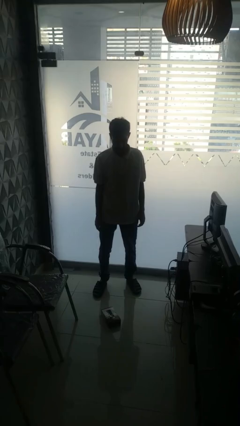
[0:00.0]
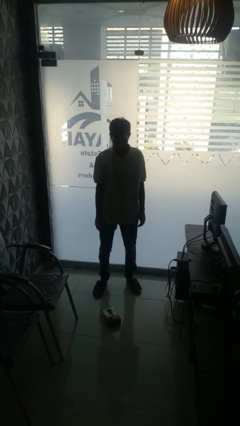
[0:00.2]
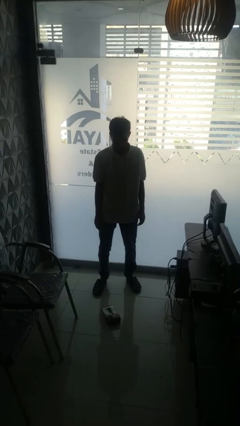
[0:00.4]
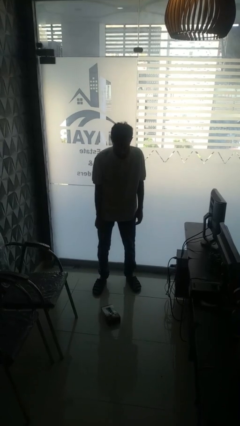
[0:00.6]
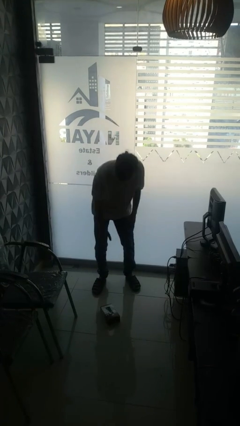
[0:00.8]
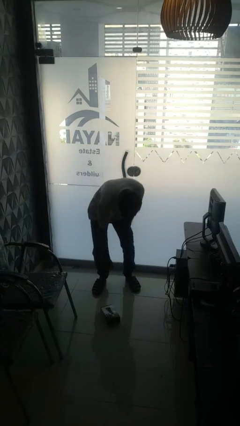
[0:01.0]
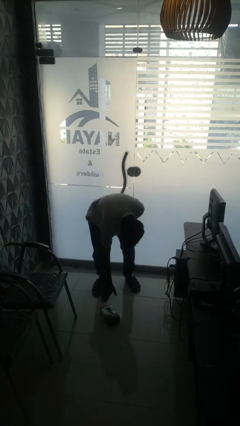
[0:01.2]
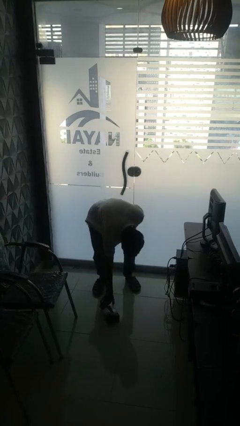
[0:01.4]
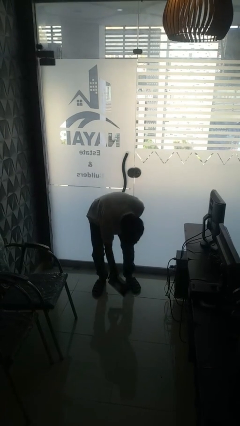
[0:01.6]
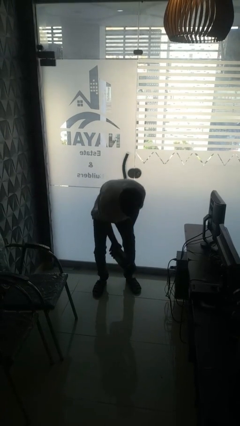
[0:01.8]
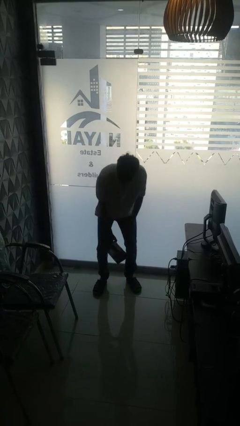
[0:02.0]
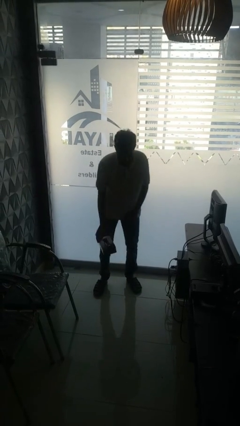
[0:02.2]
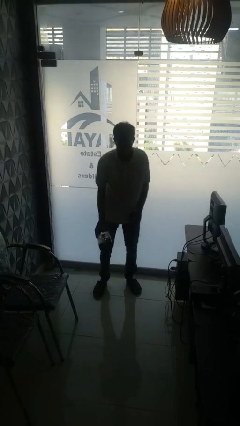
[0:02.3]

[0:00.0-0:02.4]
person picks up object from floor

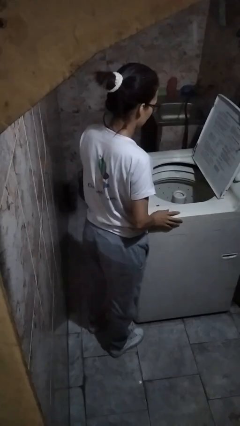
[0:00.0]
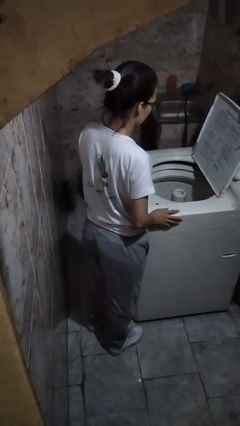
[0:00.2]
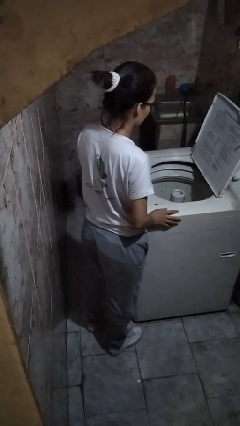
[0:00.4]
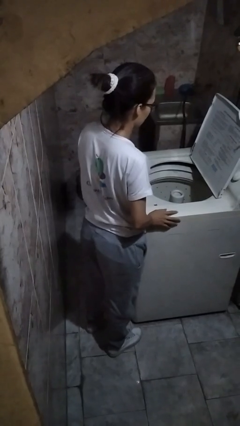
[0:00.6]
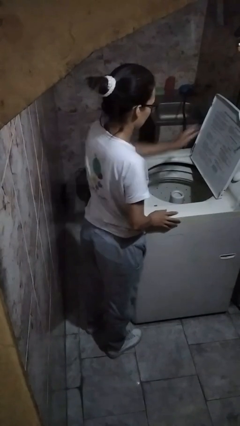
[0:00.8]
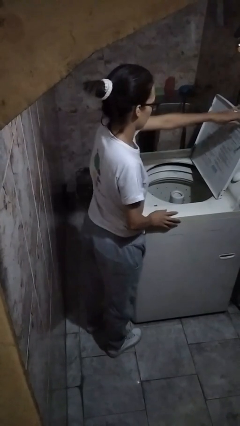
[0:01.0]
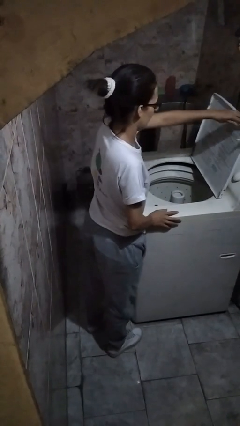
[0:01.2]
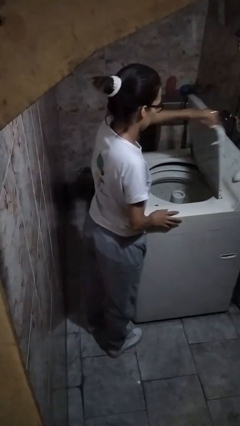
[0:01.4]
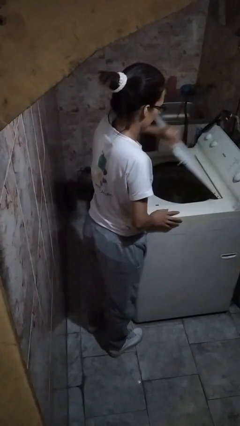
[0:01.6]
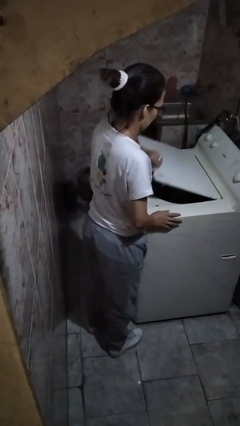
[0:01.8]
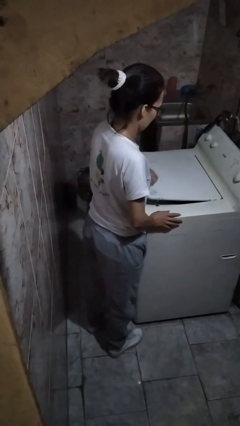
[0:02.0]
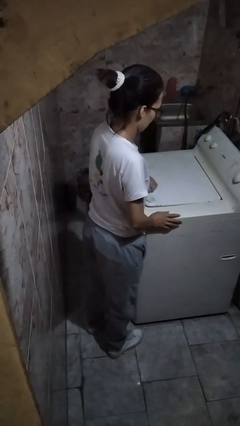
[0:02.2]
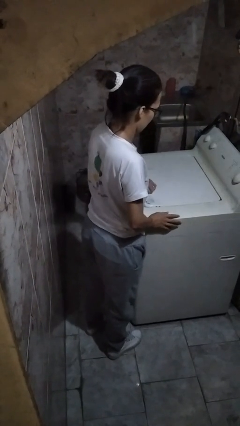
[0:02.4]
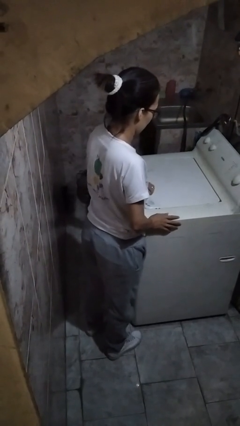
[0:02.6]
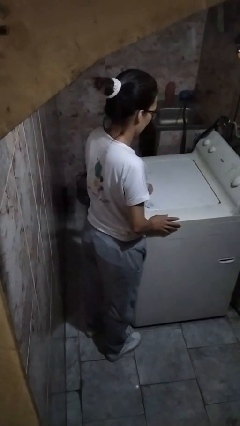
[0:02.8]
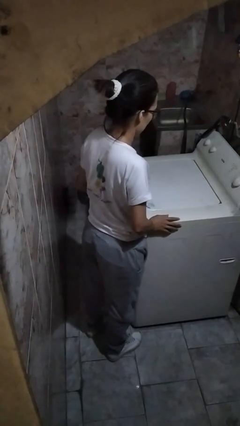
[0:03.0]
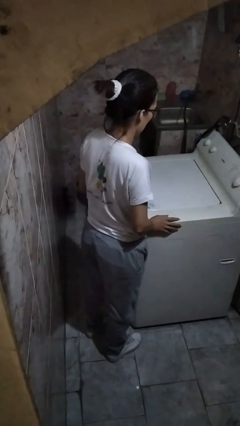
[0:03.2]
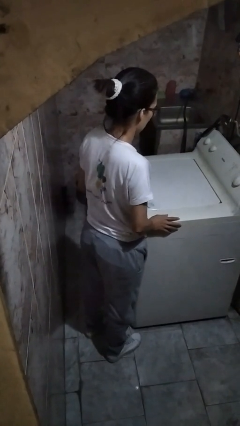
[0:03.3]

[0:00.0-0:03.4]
person closes clothes washer

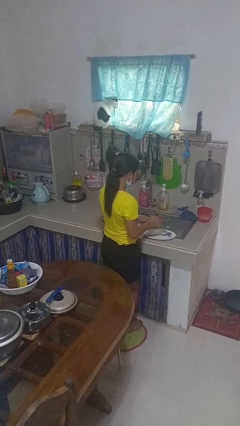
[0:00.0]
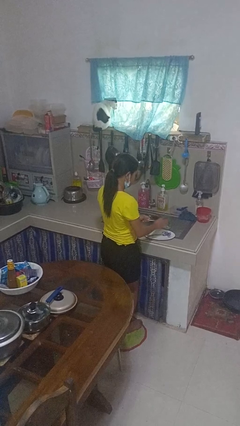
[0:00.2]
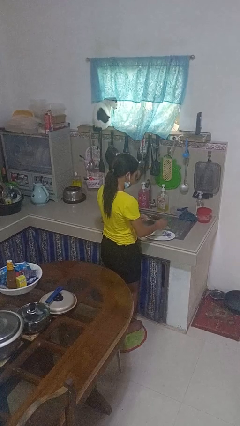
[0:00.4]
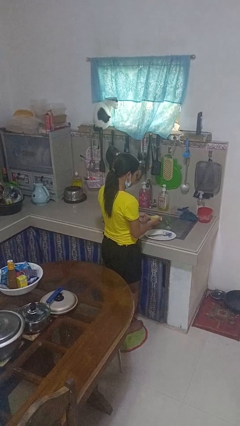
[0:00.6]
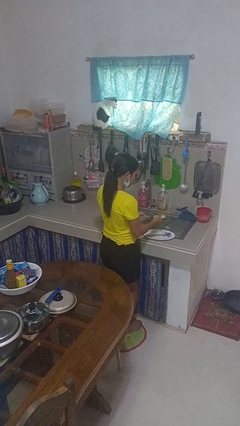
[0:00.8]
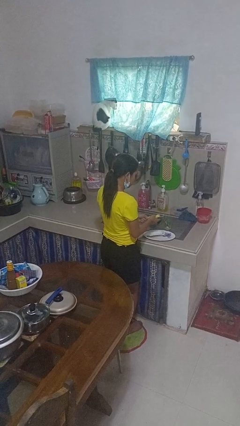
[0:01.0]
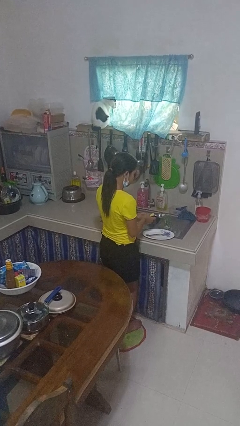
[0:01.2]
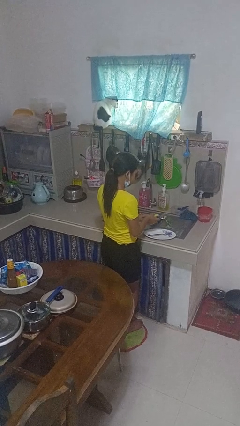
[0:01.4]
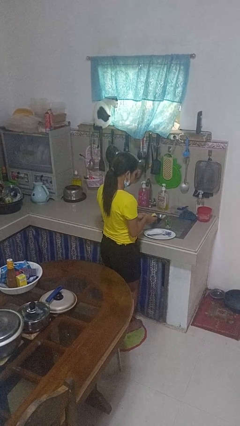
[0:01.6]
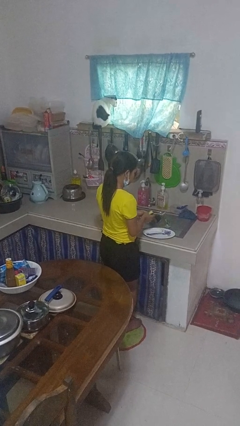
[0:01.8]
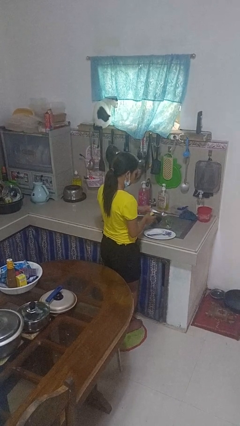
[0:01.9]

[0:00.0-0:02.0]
person washes dish

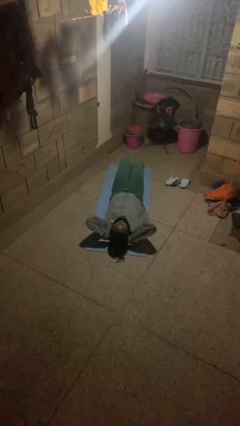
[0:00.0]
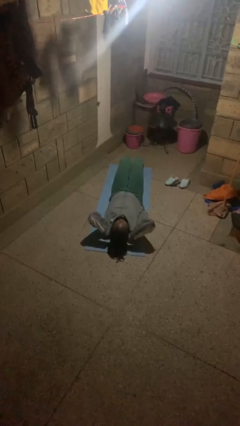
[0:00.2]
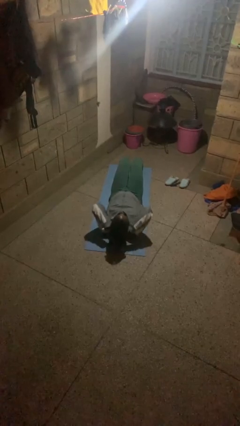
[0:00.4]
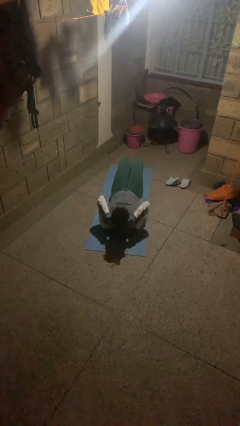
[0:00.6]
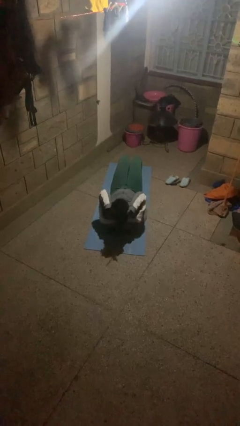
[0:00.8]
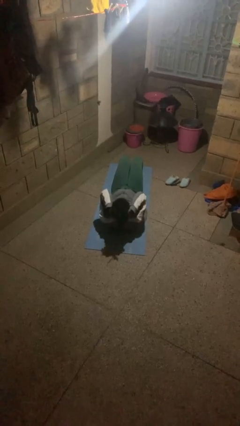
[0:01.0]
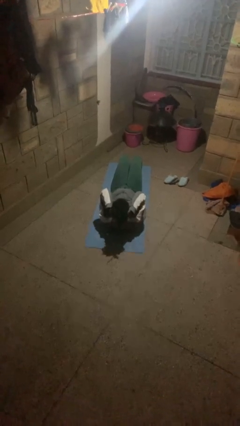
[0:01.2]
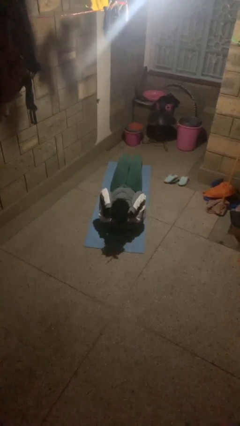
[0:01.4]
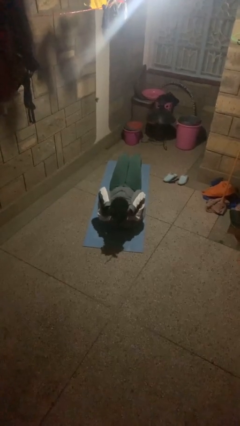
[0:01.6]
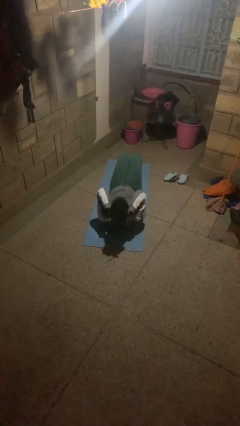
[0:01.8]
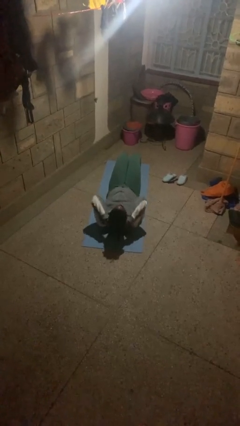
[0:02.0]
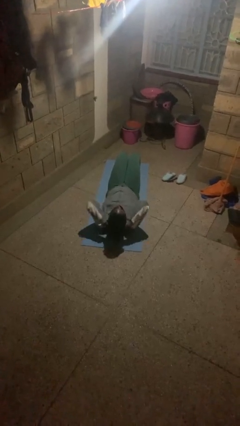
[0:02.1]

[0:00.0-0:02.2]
person exercises with situp

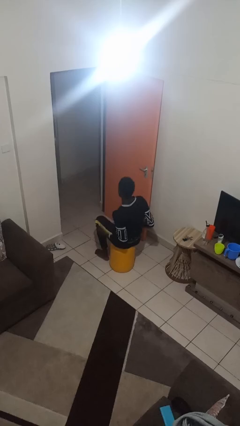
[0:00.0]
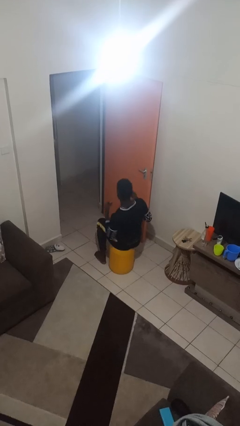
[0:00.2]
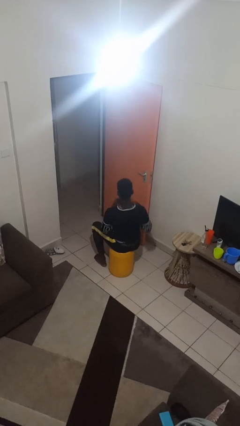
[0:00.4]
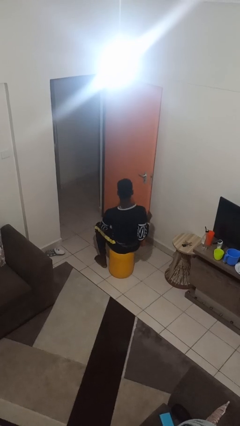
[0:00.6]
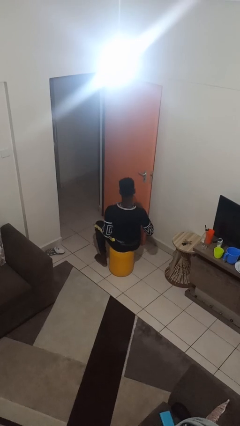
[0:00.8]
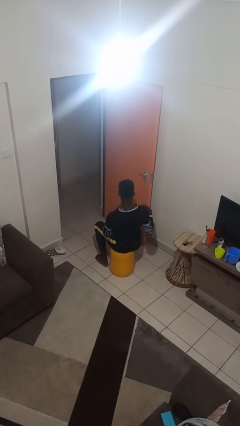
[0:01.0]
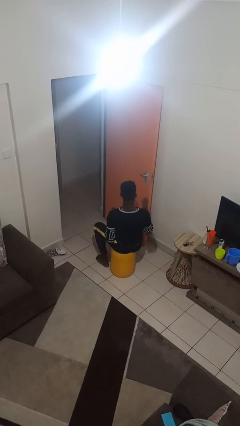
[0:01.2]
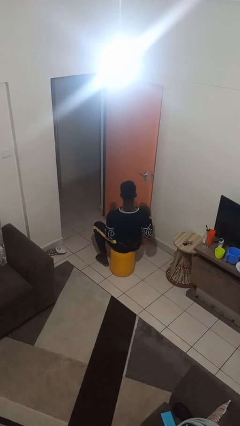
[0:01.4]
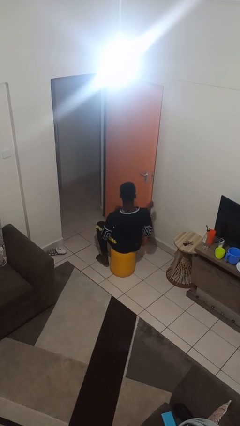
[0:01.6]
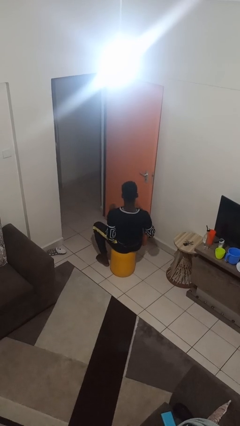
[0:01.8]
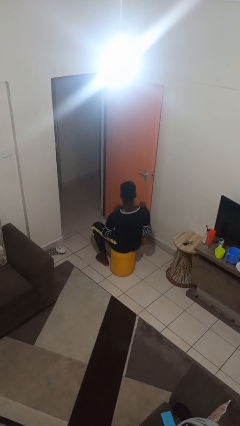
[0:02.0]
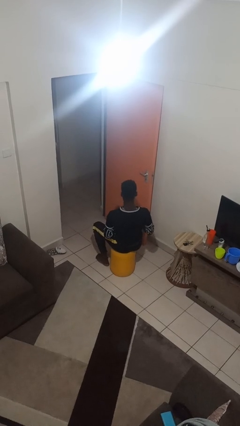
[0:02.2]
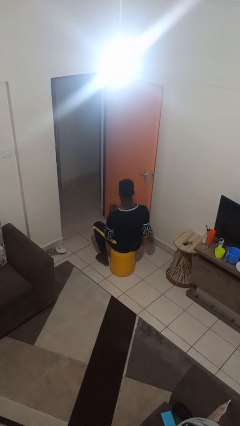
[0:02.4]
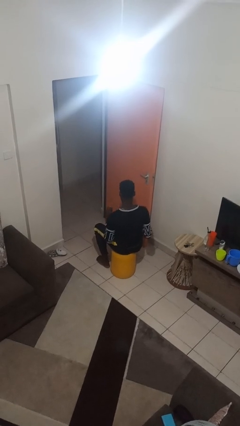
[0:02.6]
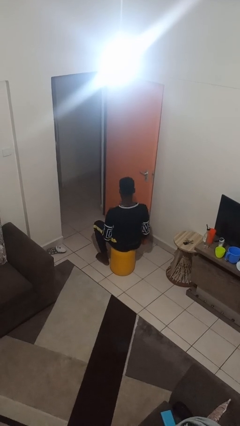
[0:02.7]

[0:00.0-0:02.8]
person drums on chest

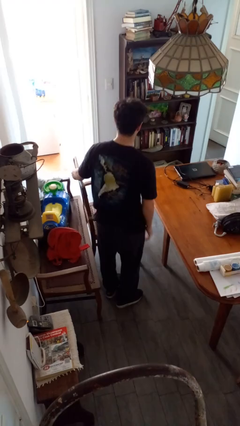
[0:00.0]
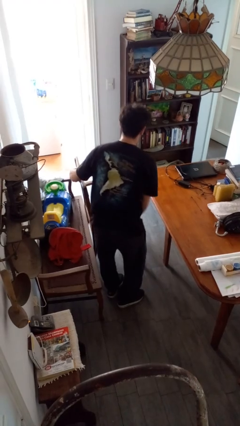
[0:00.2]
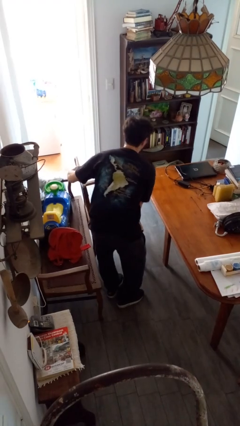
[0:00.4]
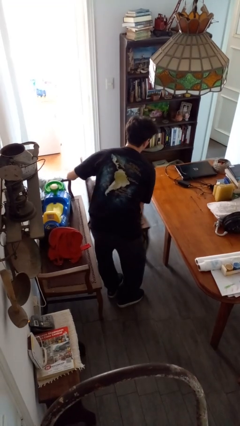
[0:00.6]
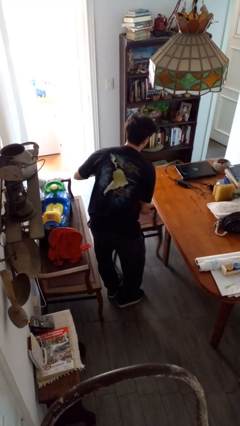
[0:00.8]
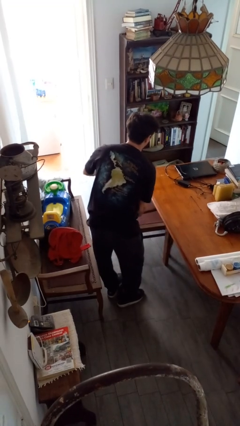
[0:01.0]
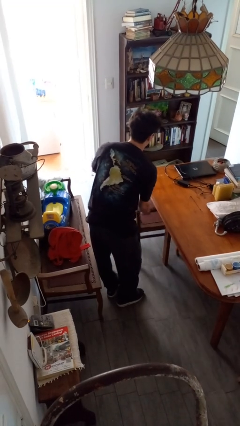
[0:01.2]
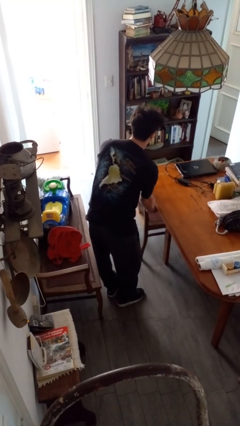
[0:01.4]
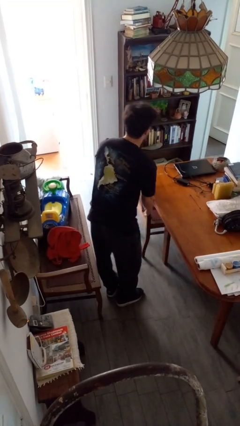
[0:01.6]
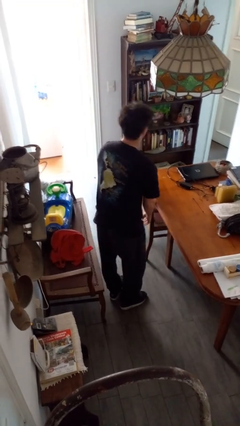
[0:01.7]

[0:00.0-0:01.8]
person pushes in chair

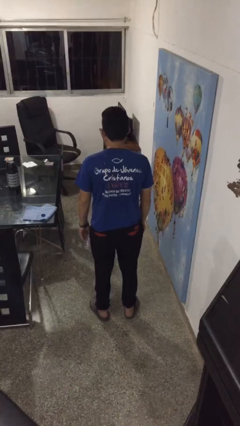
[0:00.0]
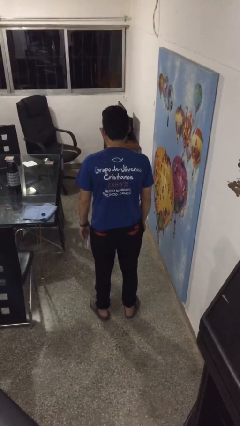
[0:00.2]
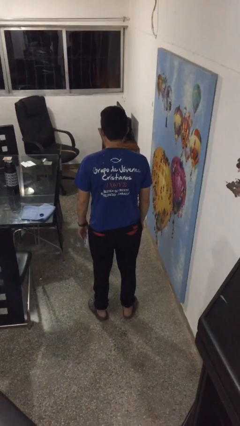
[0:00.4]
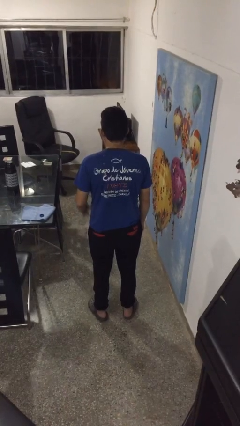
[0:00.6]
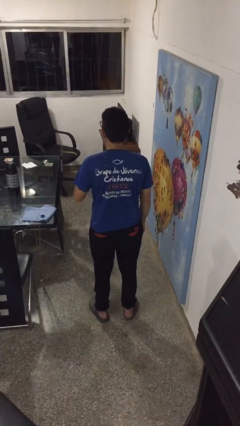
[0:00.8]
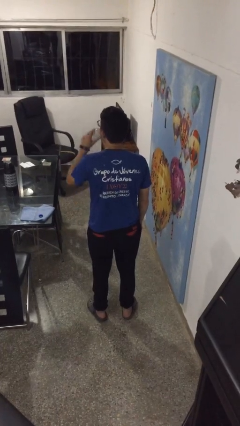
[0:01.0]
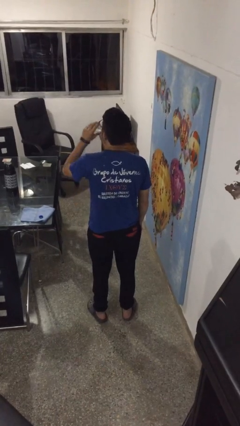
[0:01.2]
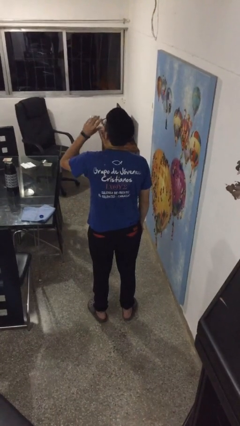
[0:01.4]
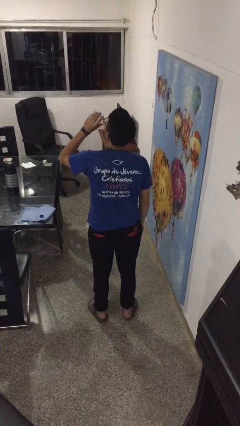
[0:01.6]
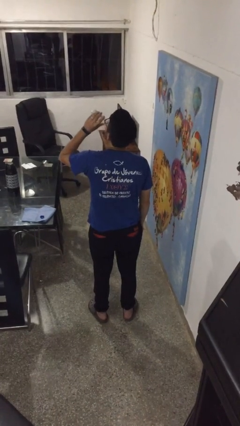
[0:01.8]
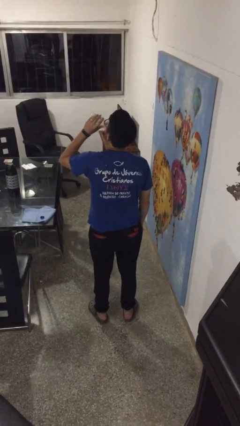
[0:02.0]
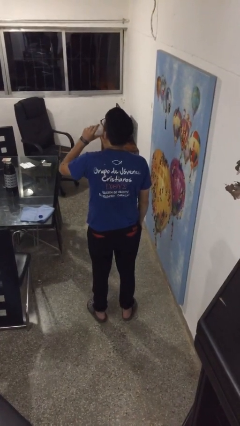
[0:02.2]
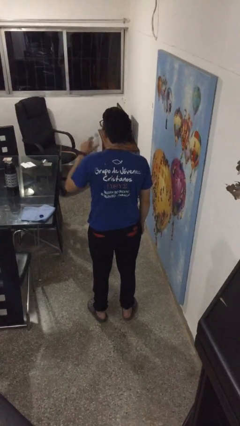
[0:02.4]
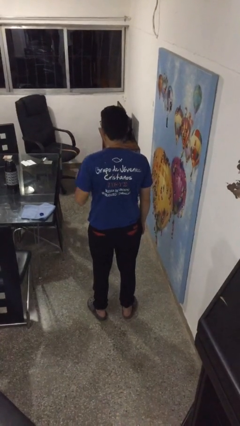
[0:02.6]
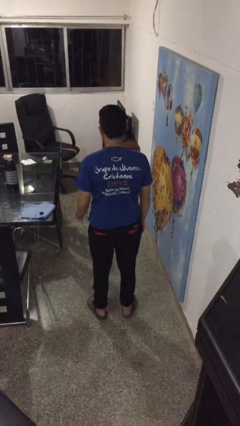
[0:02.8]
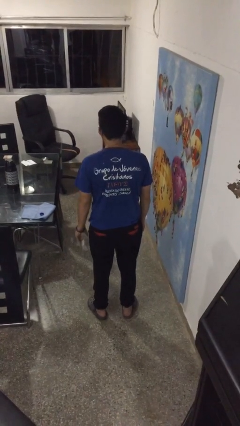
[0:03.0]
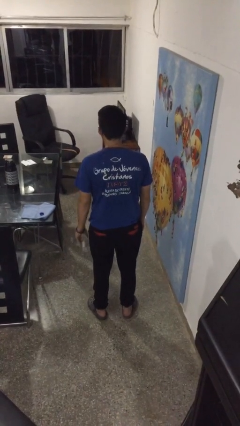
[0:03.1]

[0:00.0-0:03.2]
person drinks from bottle
